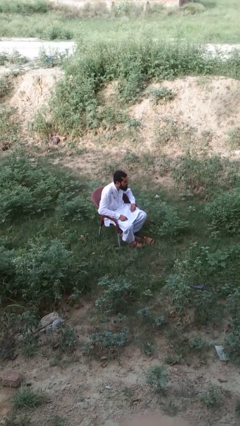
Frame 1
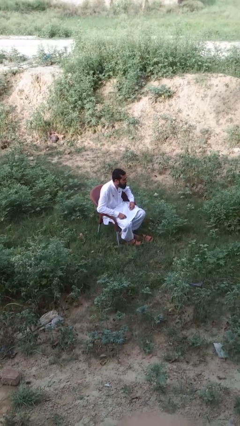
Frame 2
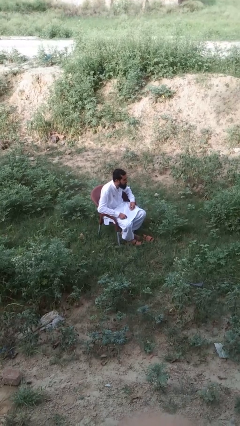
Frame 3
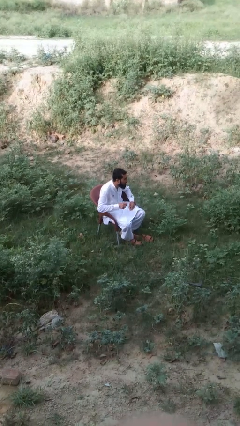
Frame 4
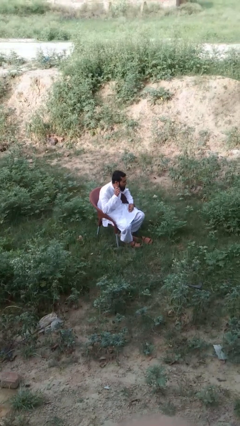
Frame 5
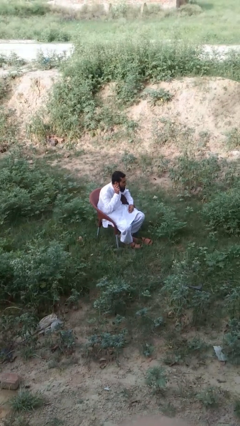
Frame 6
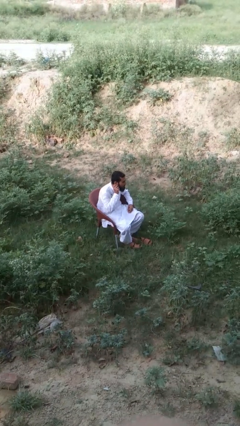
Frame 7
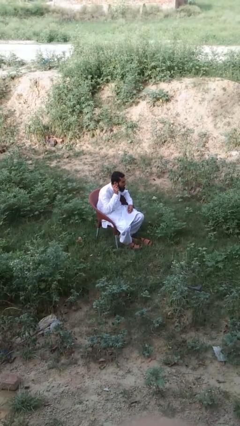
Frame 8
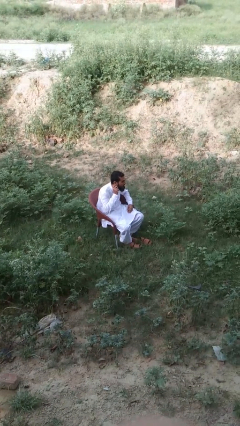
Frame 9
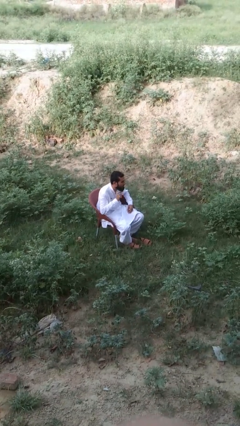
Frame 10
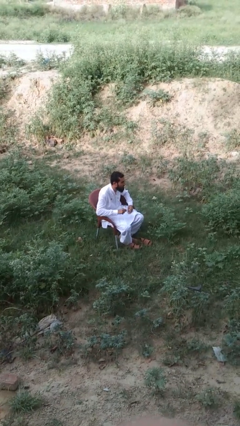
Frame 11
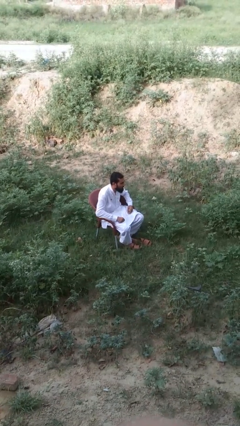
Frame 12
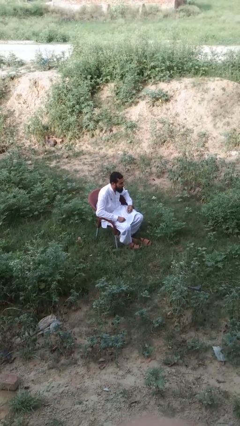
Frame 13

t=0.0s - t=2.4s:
person touches earlobe

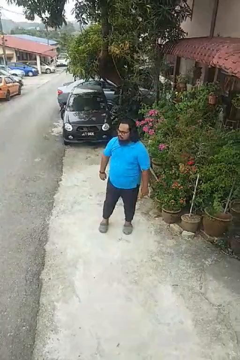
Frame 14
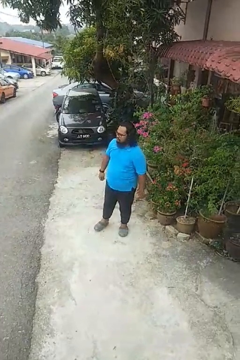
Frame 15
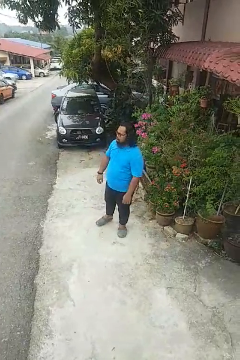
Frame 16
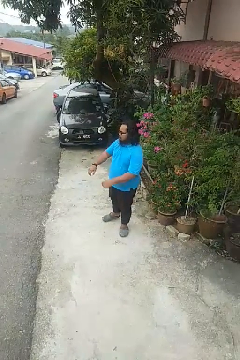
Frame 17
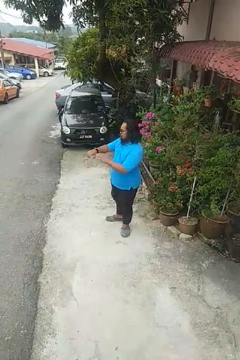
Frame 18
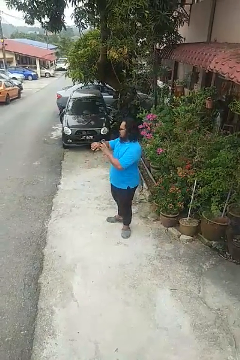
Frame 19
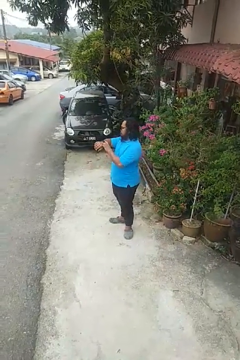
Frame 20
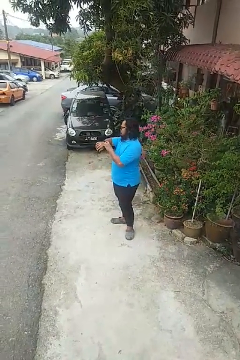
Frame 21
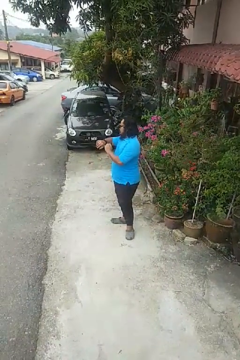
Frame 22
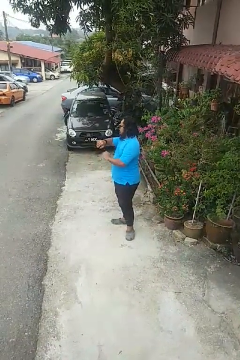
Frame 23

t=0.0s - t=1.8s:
person looks at wristwatch

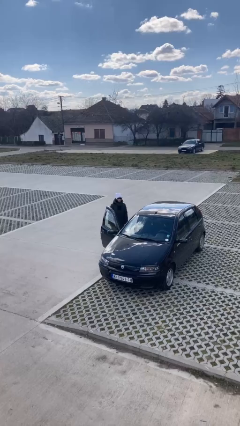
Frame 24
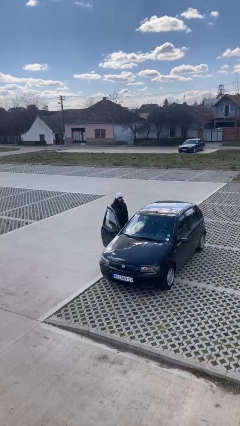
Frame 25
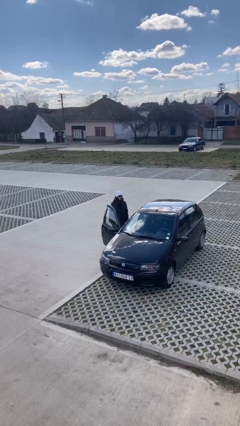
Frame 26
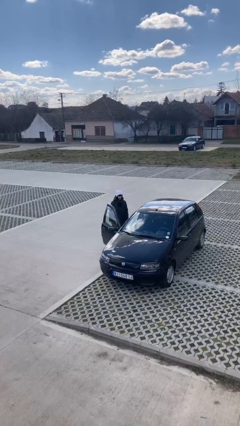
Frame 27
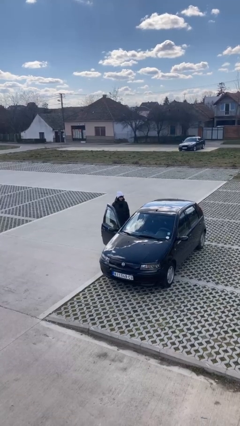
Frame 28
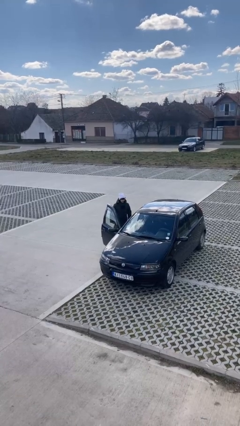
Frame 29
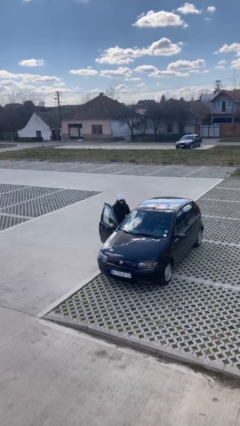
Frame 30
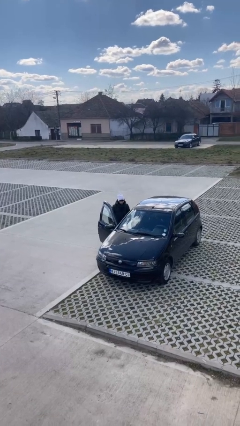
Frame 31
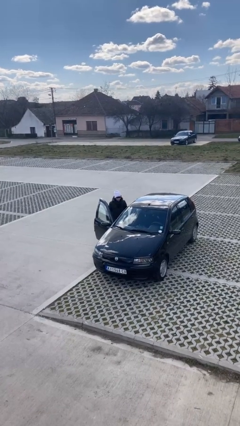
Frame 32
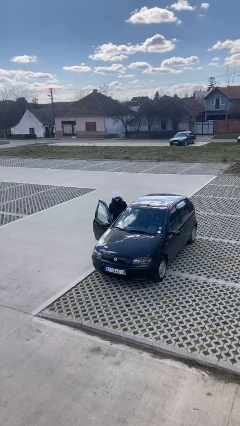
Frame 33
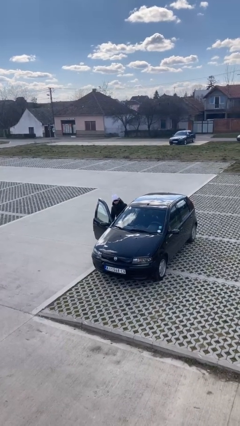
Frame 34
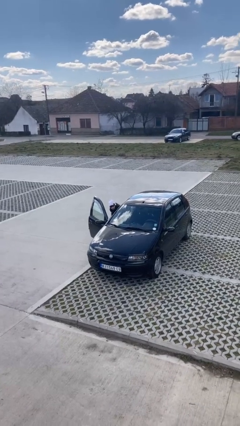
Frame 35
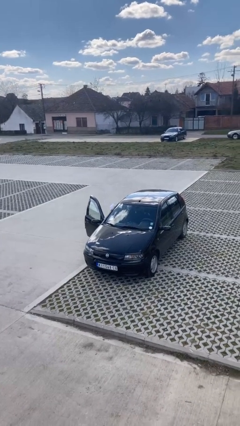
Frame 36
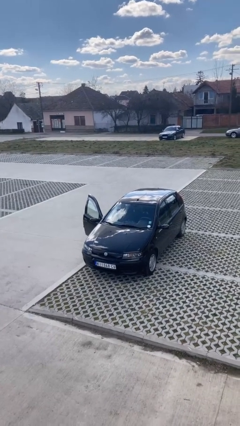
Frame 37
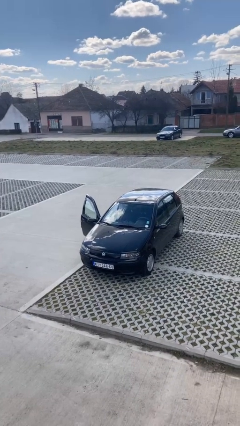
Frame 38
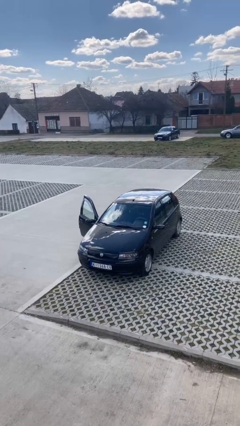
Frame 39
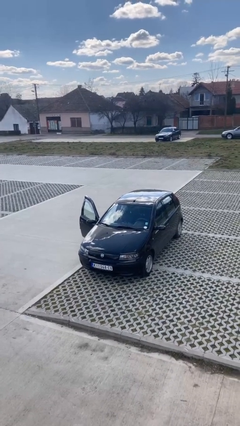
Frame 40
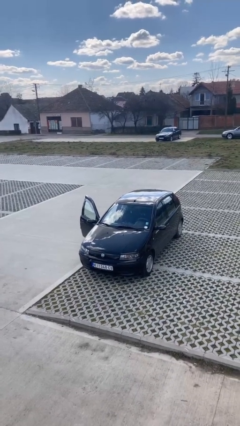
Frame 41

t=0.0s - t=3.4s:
person enters car

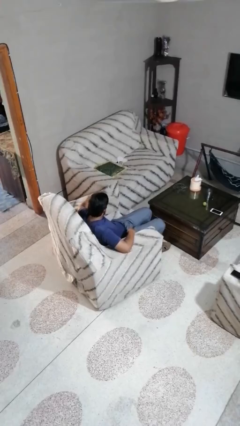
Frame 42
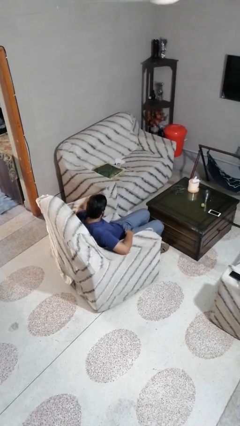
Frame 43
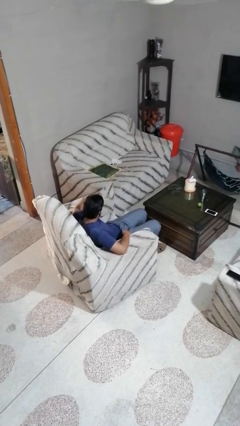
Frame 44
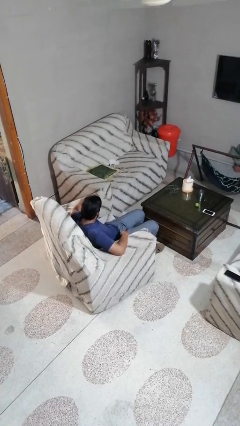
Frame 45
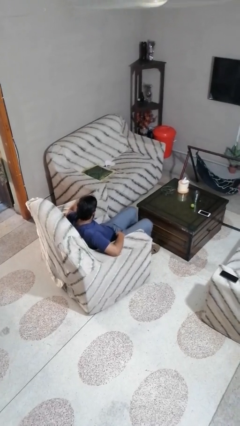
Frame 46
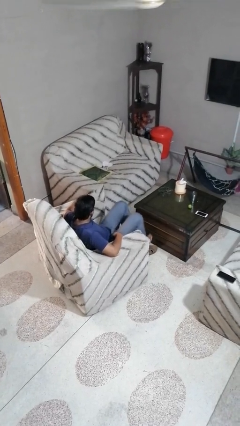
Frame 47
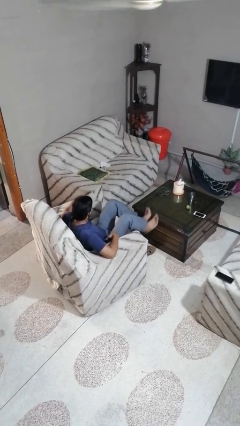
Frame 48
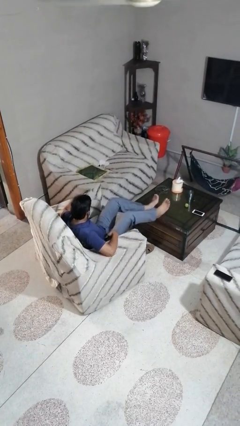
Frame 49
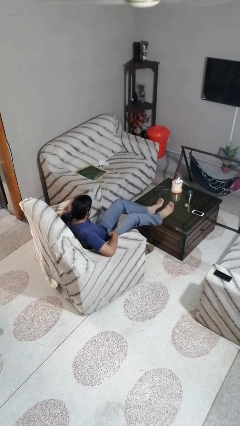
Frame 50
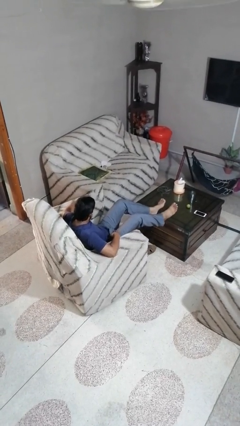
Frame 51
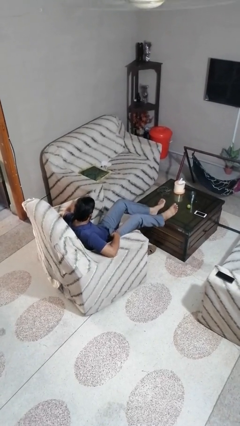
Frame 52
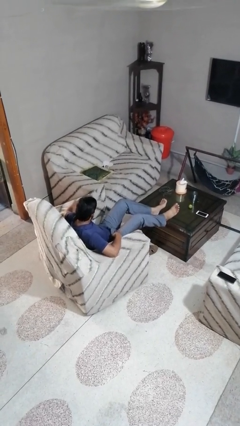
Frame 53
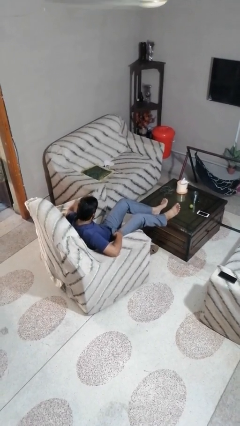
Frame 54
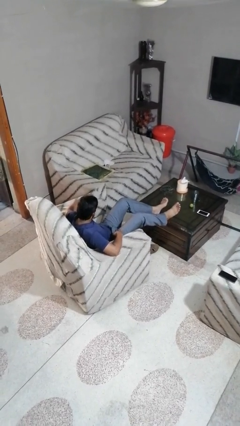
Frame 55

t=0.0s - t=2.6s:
person puts feet up

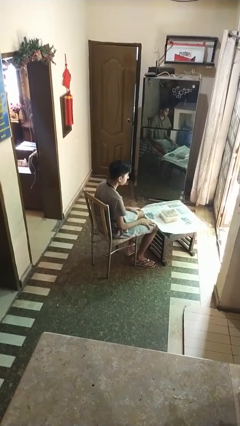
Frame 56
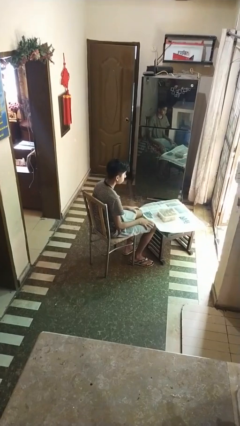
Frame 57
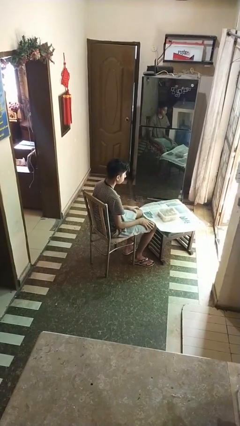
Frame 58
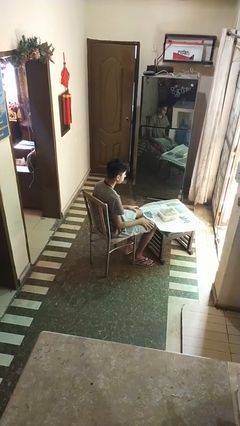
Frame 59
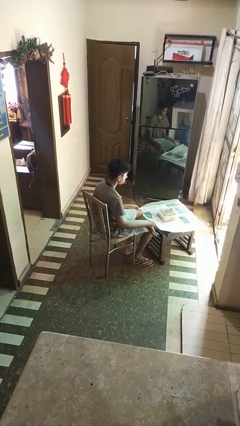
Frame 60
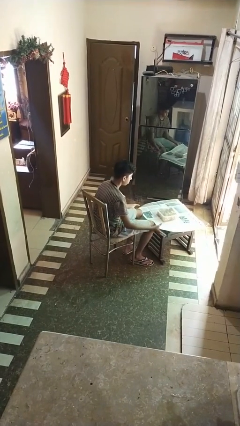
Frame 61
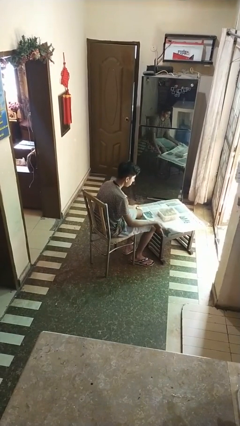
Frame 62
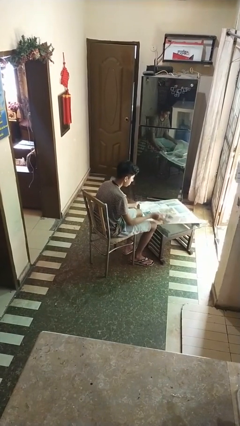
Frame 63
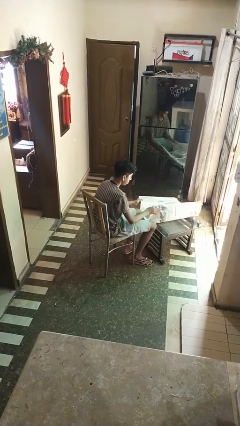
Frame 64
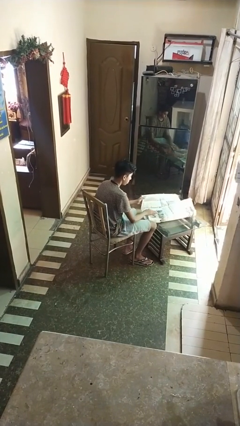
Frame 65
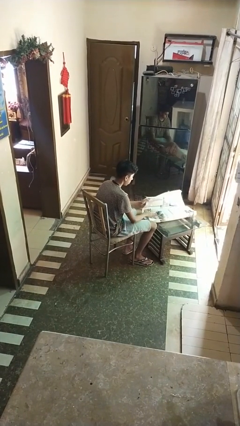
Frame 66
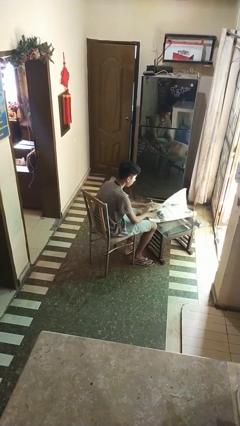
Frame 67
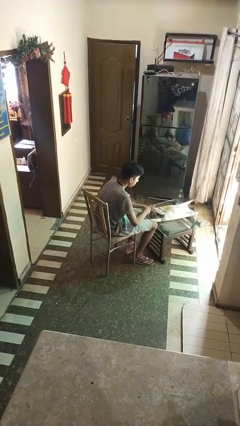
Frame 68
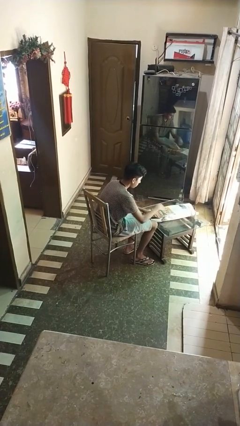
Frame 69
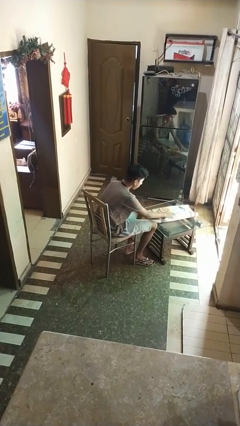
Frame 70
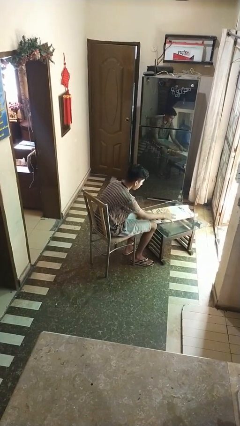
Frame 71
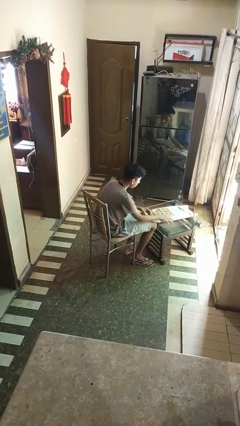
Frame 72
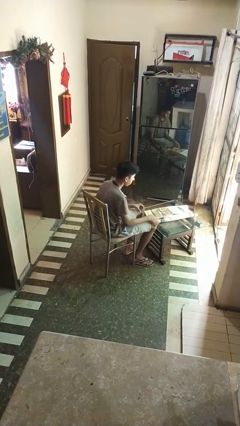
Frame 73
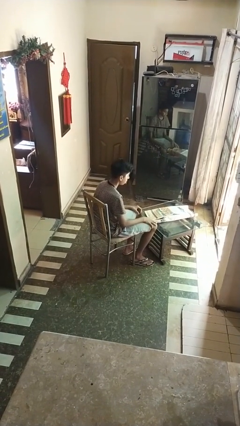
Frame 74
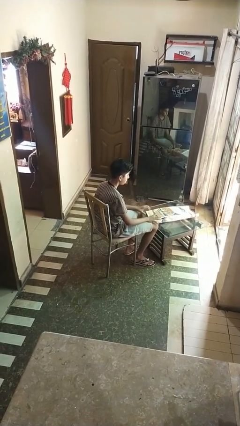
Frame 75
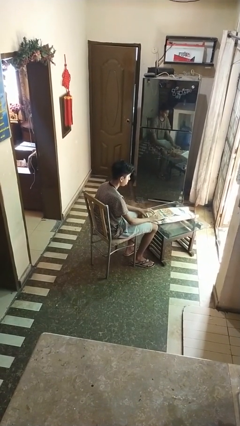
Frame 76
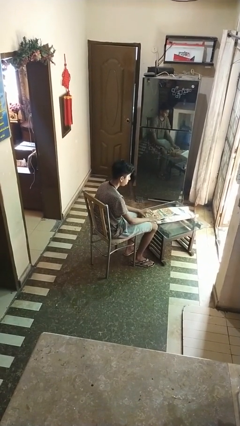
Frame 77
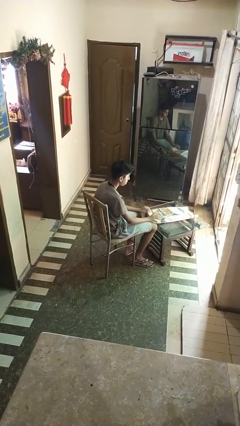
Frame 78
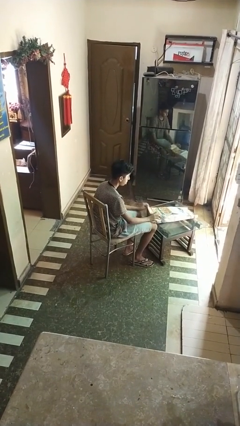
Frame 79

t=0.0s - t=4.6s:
person wraps box

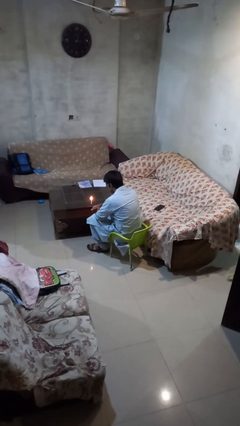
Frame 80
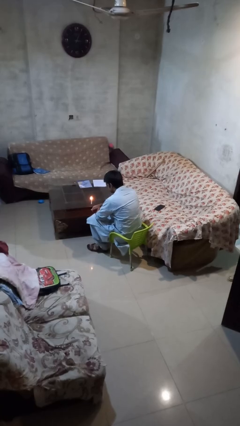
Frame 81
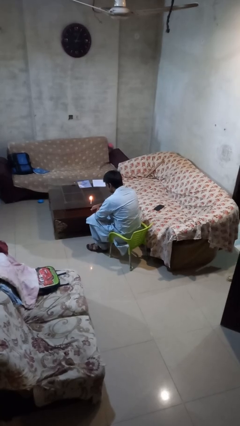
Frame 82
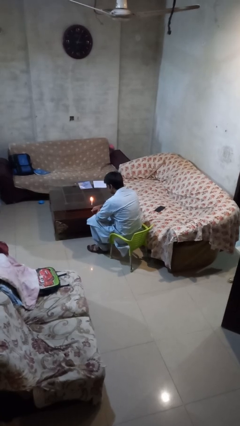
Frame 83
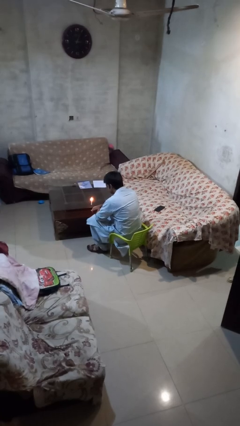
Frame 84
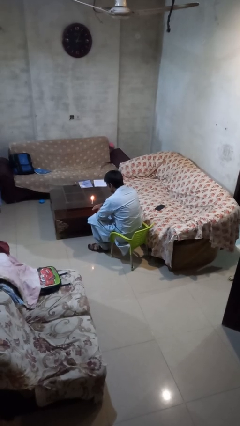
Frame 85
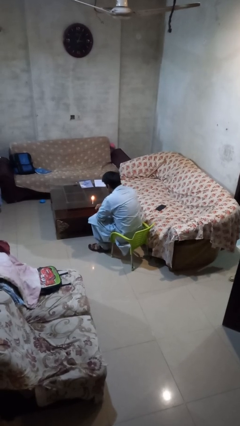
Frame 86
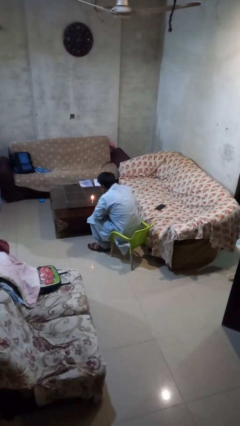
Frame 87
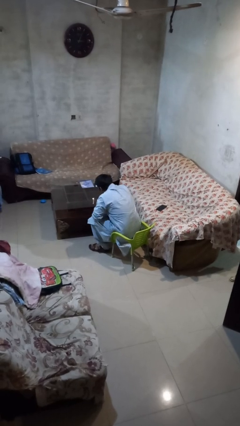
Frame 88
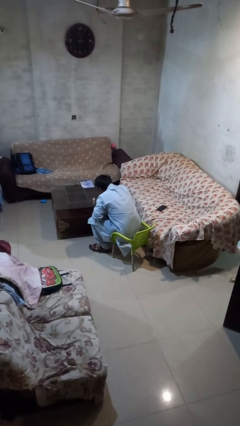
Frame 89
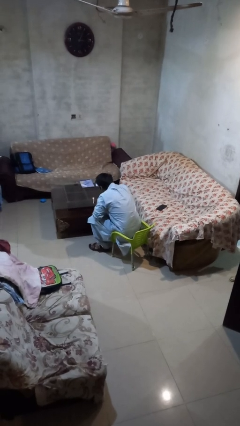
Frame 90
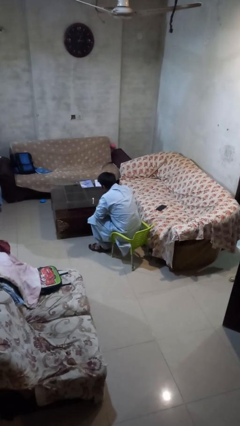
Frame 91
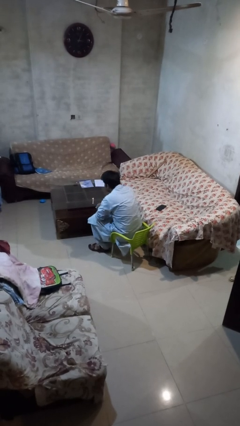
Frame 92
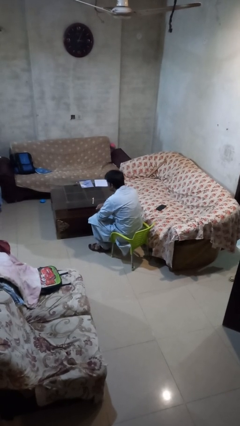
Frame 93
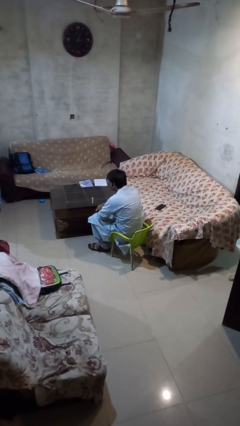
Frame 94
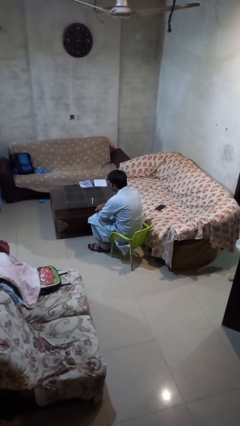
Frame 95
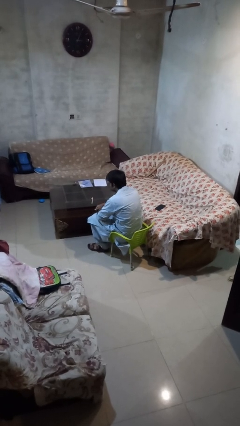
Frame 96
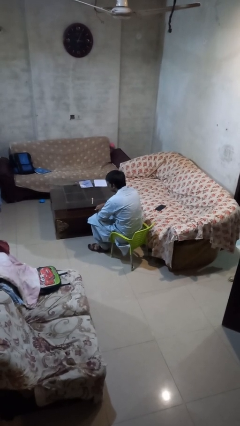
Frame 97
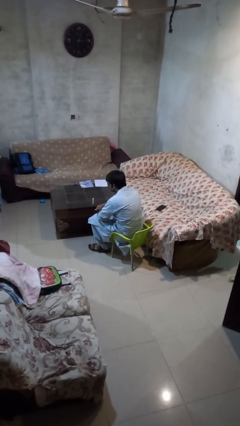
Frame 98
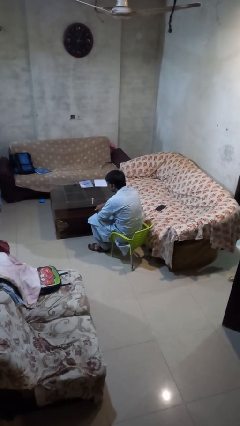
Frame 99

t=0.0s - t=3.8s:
person extinguishes candle
